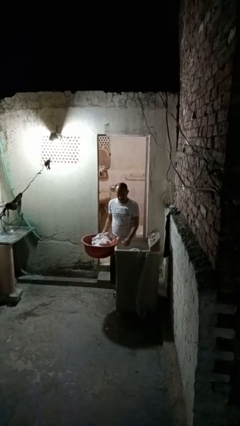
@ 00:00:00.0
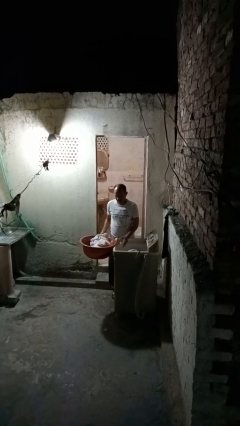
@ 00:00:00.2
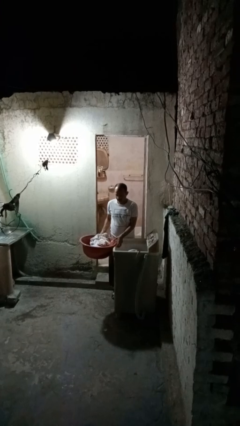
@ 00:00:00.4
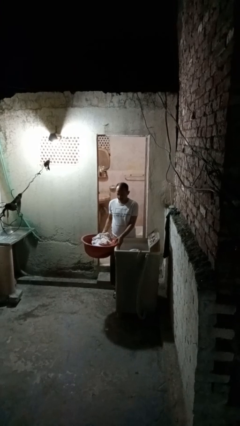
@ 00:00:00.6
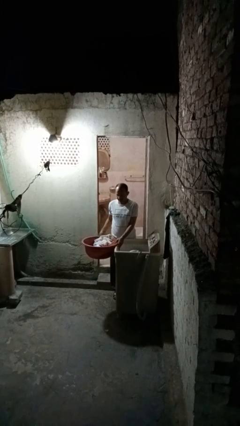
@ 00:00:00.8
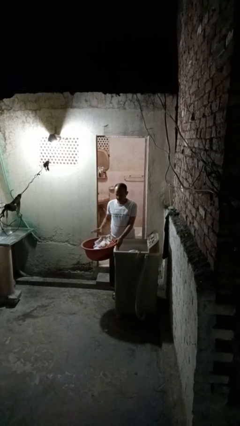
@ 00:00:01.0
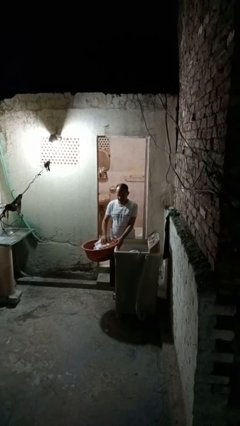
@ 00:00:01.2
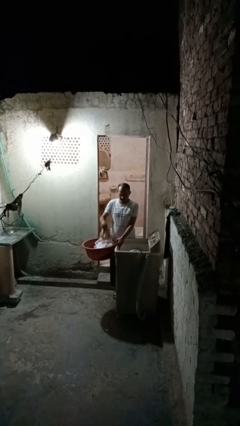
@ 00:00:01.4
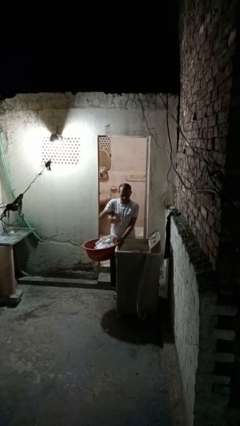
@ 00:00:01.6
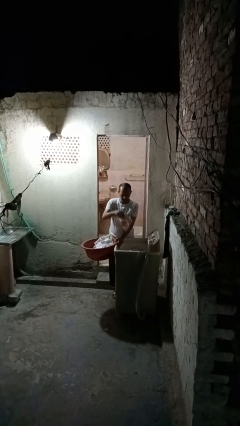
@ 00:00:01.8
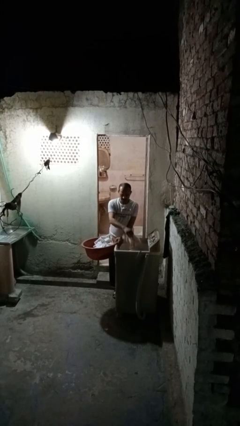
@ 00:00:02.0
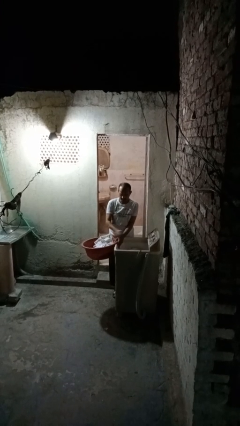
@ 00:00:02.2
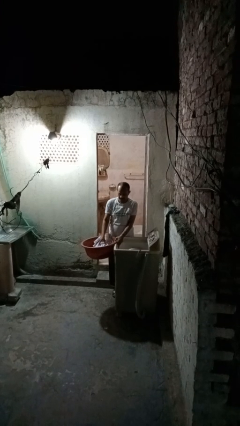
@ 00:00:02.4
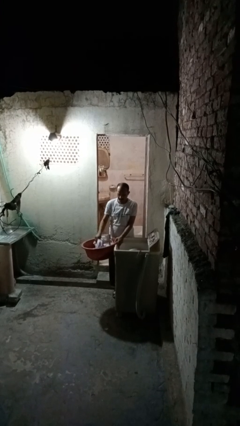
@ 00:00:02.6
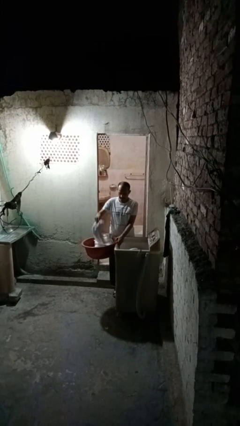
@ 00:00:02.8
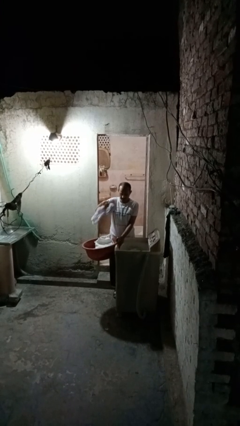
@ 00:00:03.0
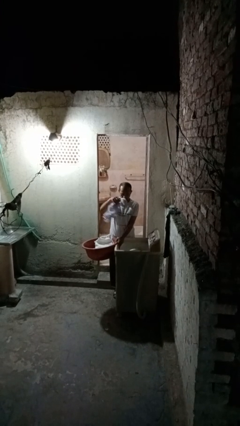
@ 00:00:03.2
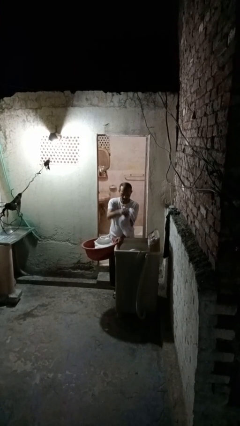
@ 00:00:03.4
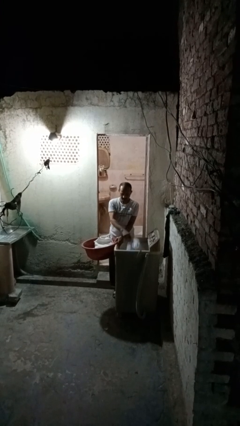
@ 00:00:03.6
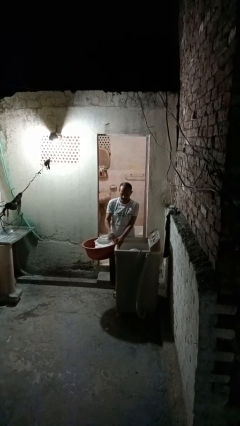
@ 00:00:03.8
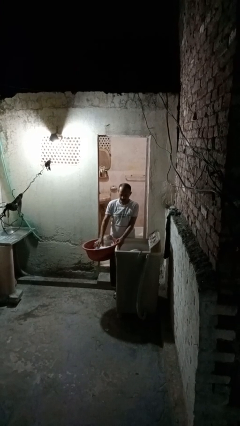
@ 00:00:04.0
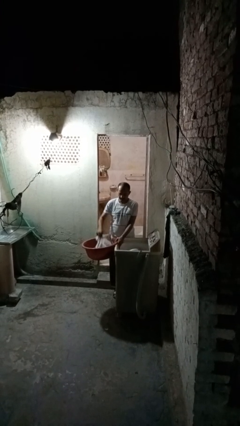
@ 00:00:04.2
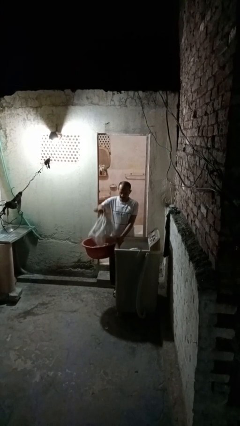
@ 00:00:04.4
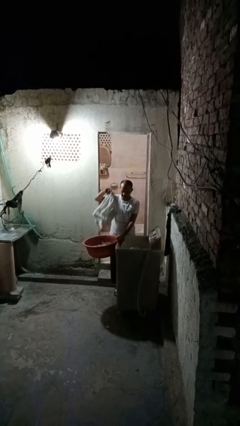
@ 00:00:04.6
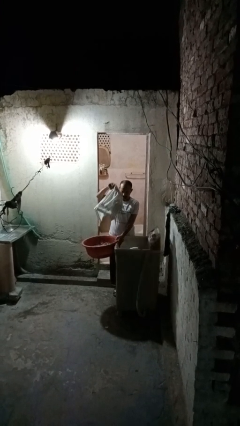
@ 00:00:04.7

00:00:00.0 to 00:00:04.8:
person loads clotheswasher

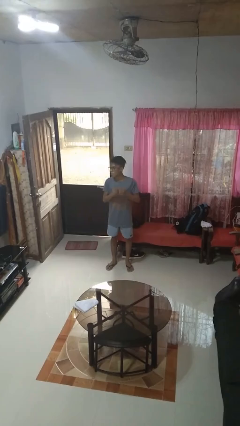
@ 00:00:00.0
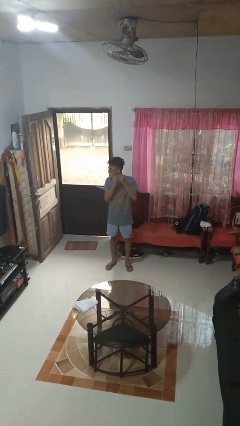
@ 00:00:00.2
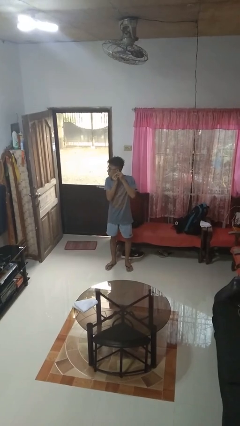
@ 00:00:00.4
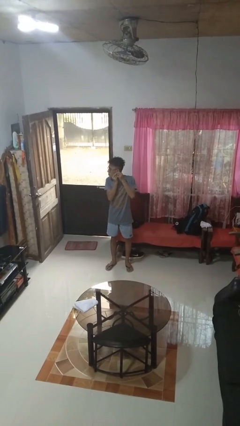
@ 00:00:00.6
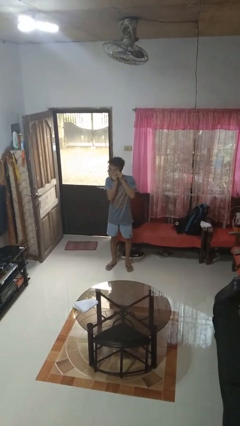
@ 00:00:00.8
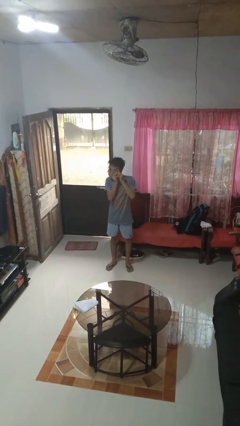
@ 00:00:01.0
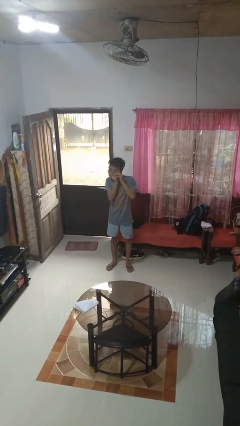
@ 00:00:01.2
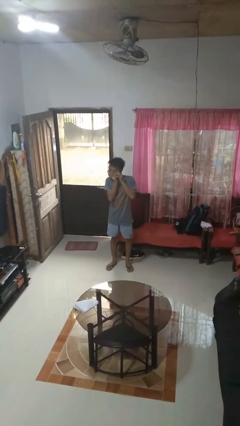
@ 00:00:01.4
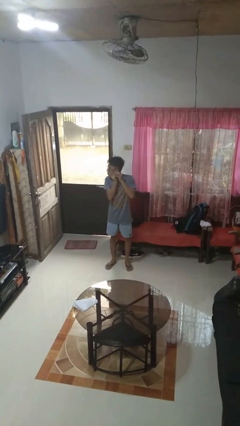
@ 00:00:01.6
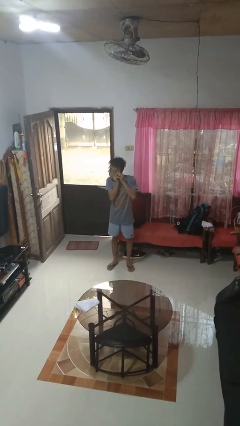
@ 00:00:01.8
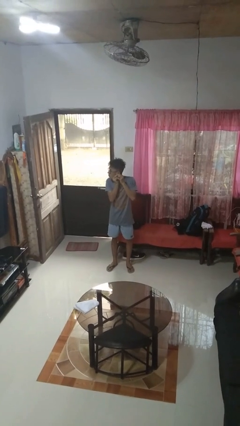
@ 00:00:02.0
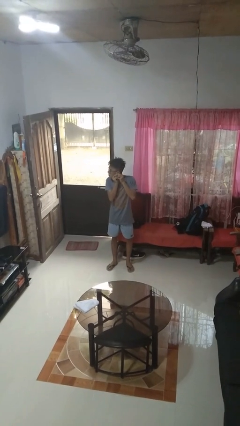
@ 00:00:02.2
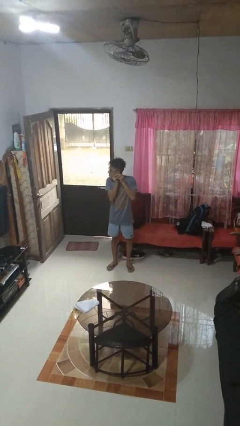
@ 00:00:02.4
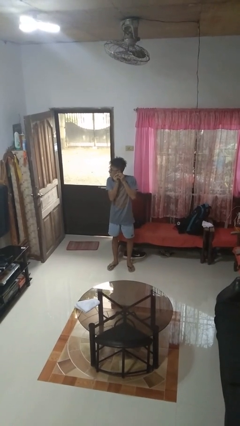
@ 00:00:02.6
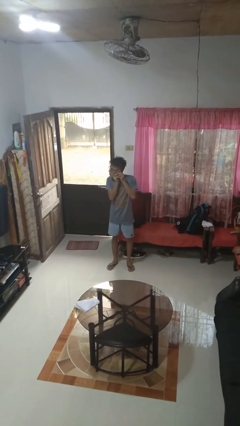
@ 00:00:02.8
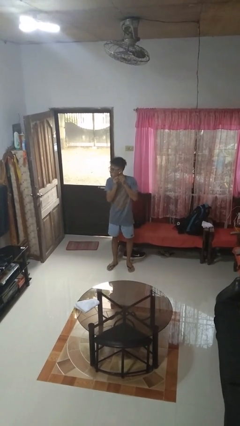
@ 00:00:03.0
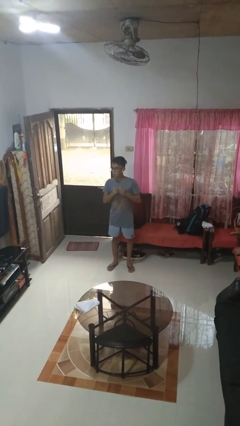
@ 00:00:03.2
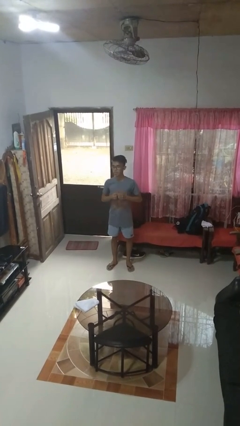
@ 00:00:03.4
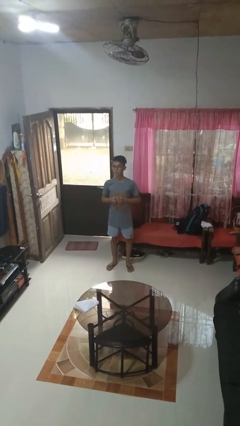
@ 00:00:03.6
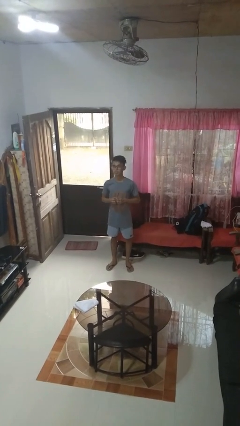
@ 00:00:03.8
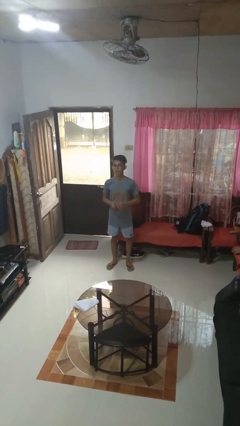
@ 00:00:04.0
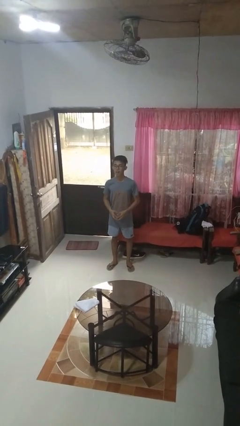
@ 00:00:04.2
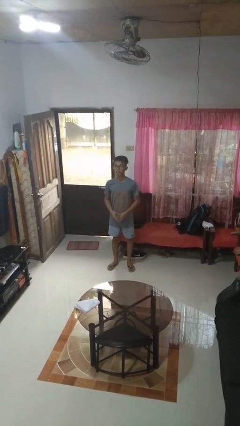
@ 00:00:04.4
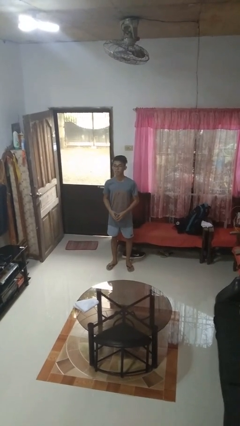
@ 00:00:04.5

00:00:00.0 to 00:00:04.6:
person puts on earrings

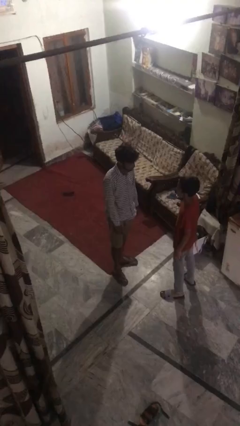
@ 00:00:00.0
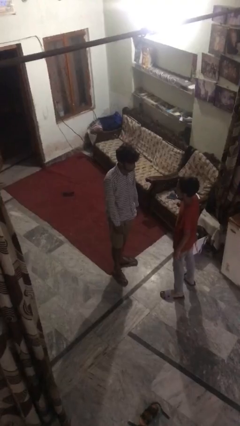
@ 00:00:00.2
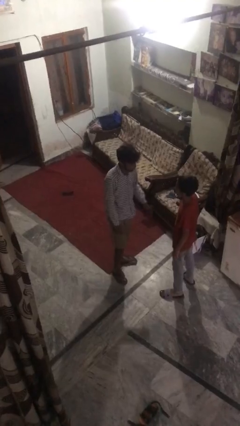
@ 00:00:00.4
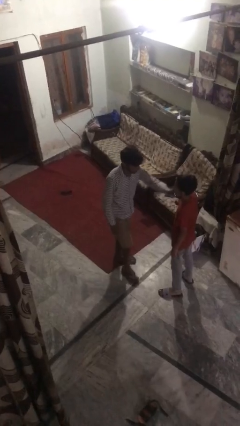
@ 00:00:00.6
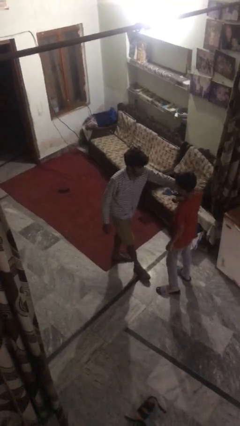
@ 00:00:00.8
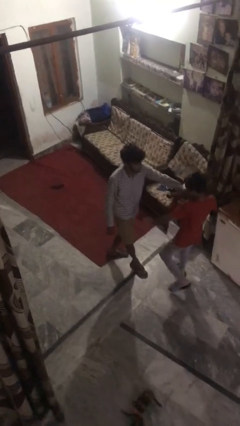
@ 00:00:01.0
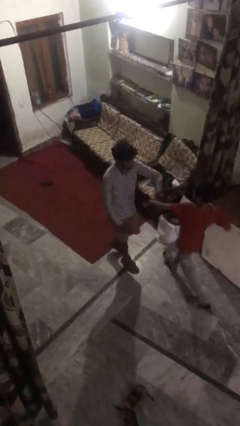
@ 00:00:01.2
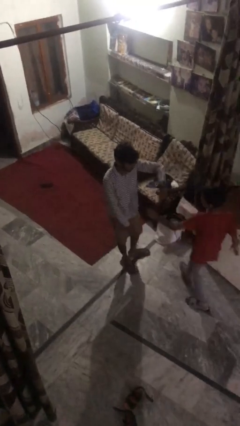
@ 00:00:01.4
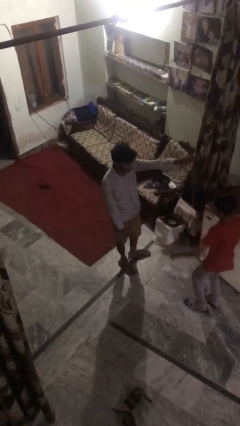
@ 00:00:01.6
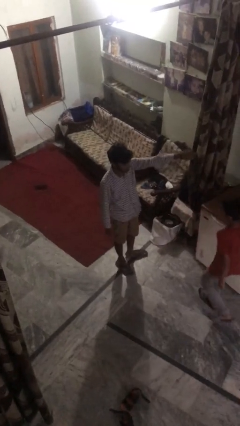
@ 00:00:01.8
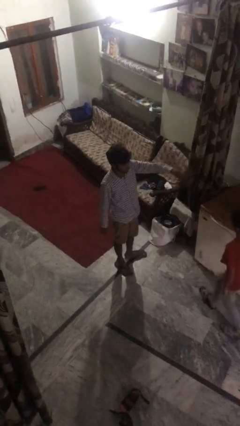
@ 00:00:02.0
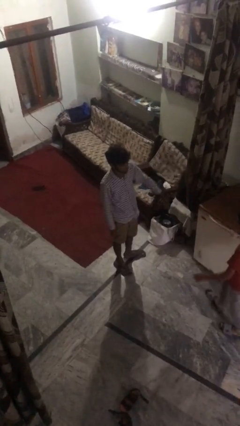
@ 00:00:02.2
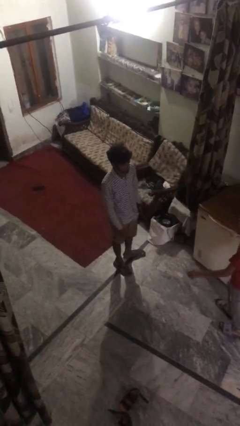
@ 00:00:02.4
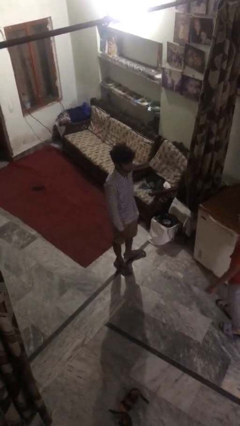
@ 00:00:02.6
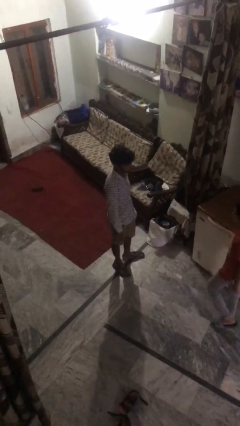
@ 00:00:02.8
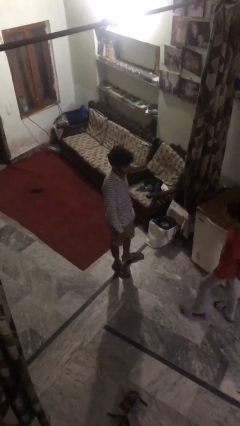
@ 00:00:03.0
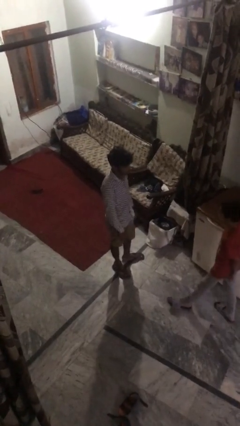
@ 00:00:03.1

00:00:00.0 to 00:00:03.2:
person shoves person

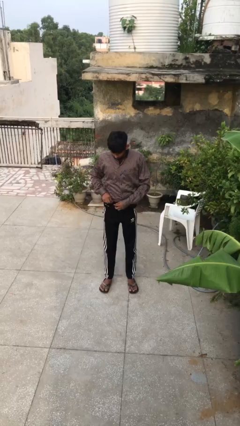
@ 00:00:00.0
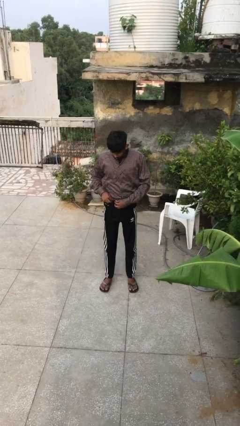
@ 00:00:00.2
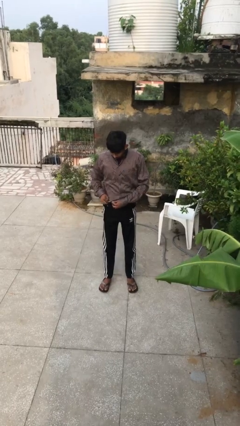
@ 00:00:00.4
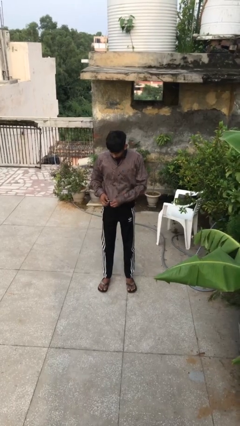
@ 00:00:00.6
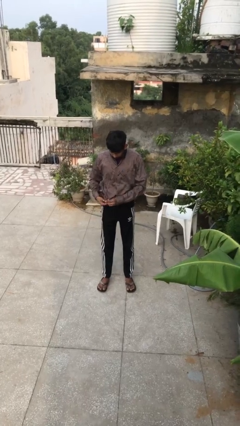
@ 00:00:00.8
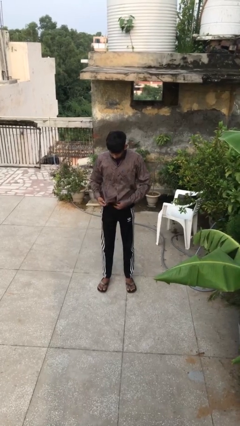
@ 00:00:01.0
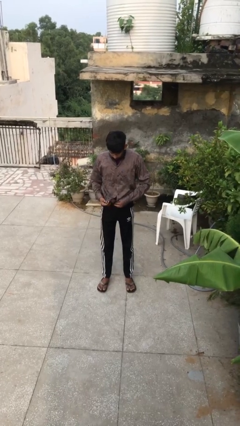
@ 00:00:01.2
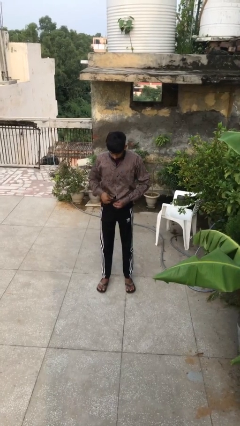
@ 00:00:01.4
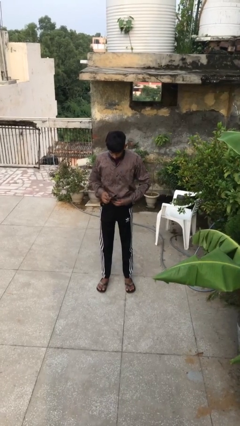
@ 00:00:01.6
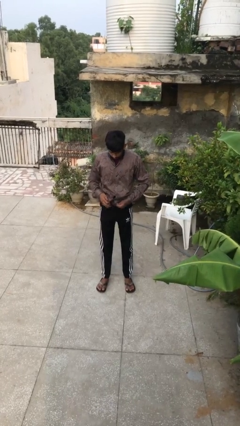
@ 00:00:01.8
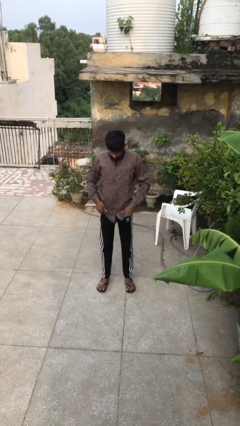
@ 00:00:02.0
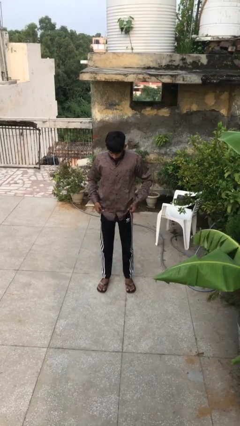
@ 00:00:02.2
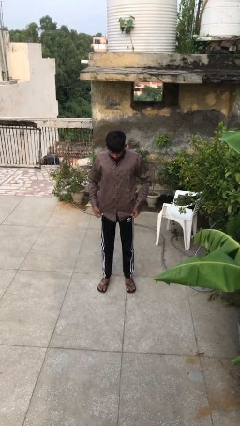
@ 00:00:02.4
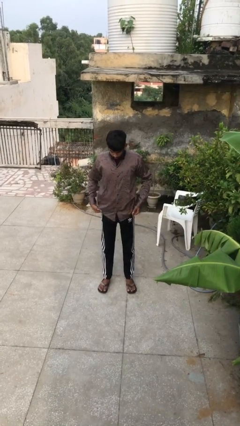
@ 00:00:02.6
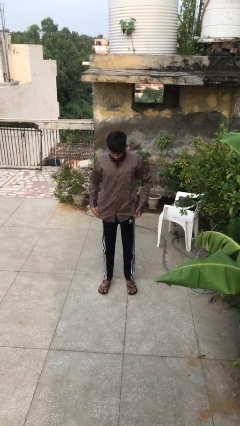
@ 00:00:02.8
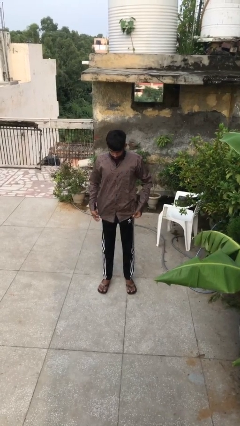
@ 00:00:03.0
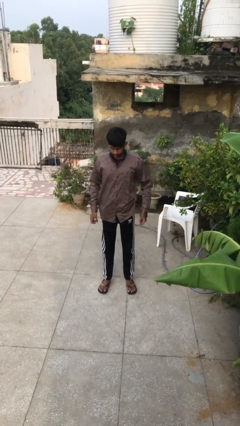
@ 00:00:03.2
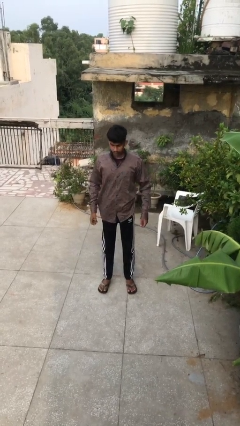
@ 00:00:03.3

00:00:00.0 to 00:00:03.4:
person untucks shirt

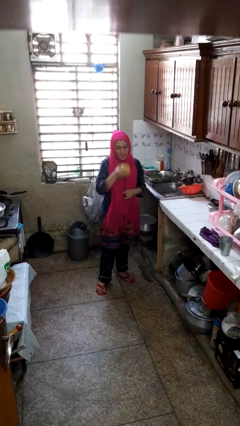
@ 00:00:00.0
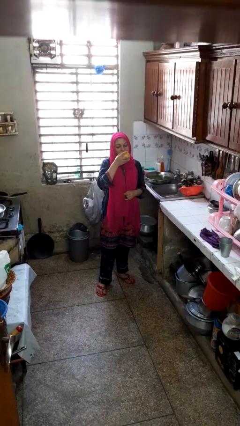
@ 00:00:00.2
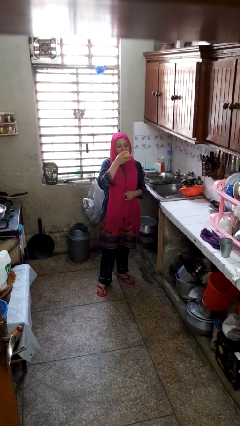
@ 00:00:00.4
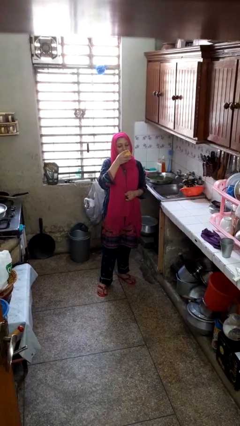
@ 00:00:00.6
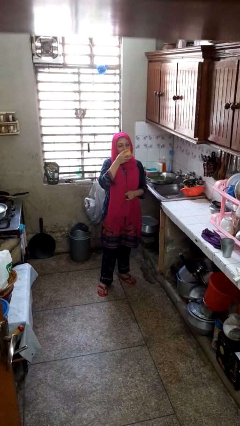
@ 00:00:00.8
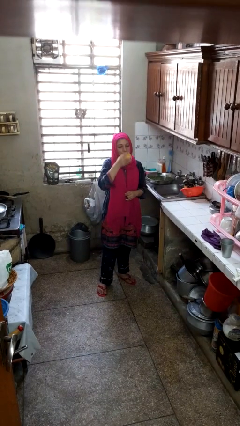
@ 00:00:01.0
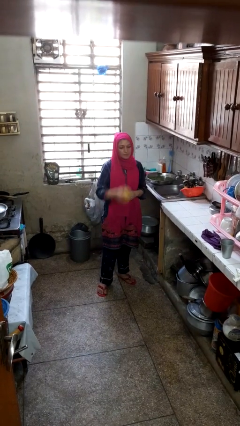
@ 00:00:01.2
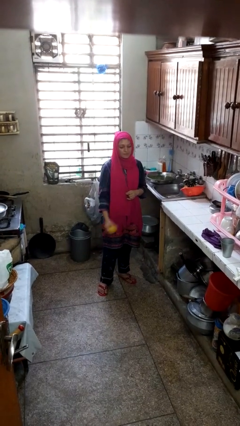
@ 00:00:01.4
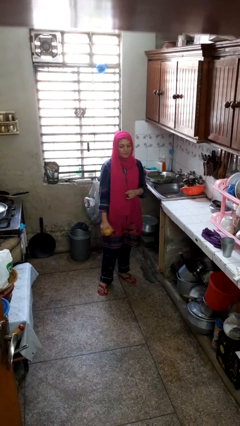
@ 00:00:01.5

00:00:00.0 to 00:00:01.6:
person eats apple
